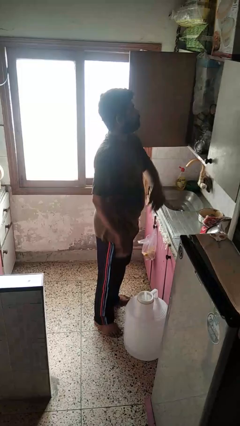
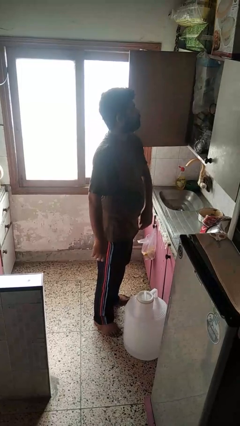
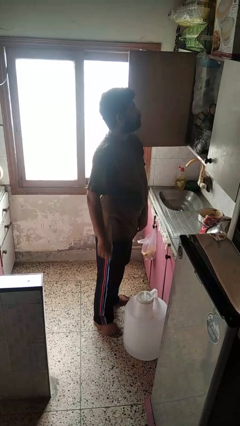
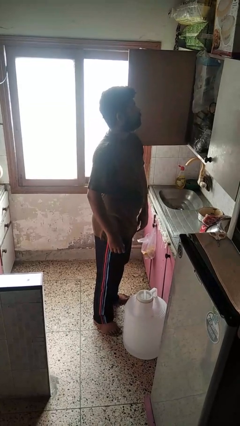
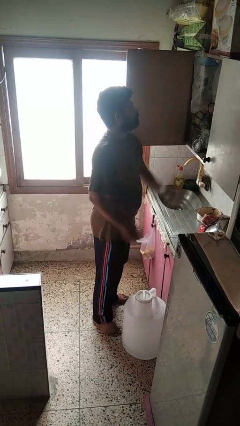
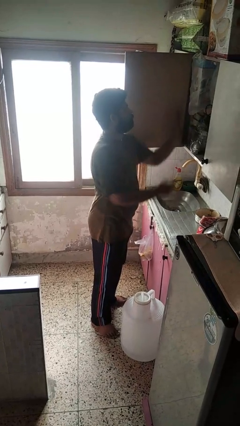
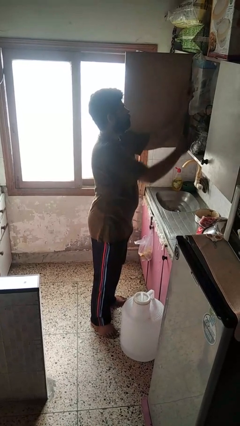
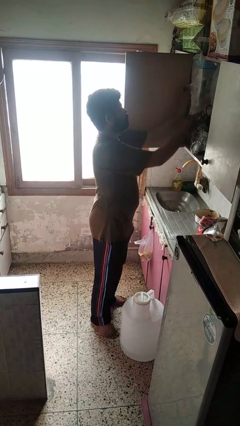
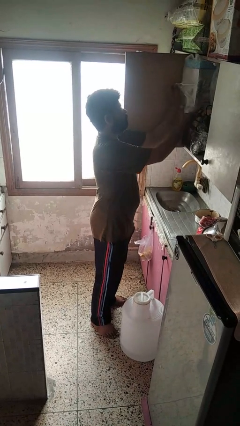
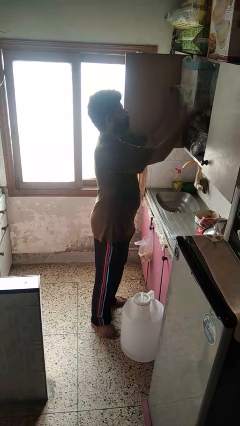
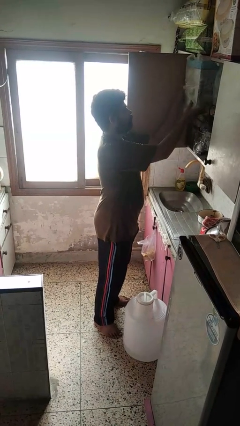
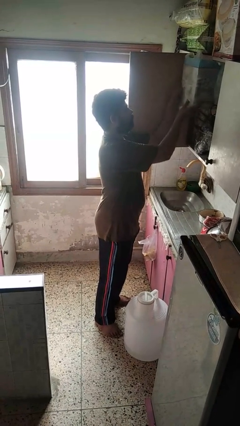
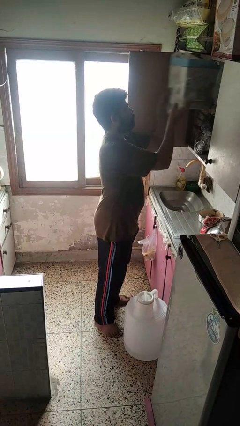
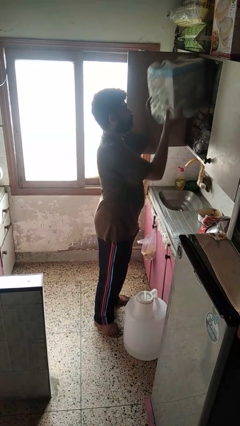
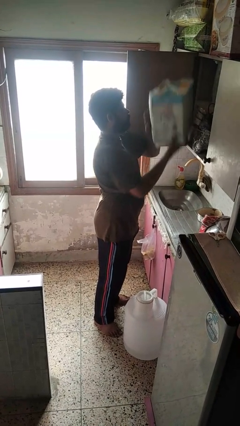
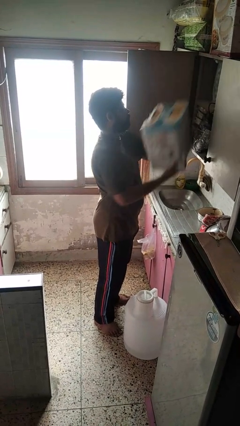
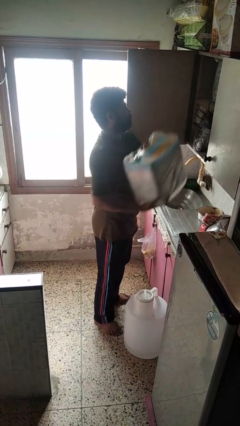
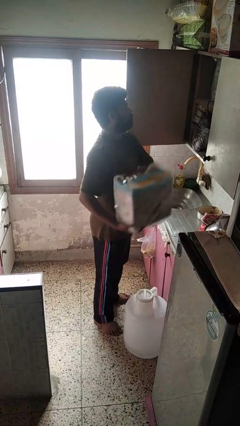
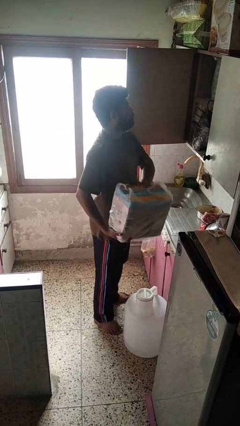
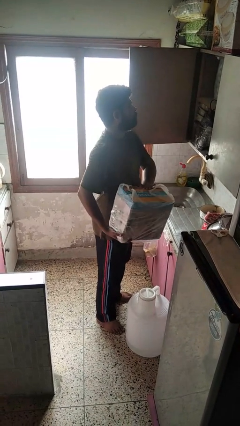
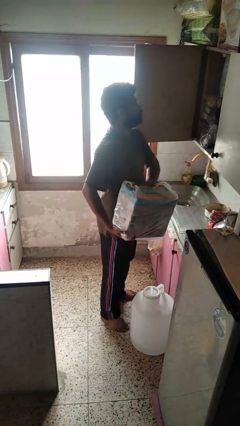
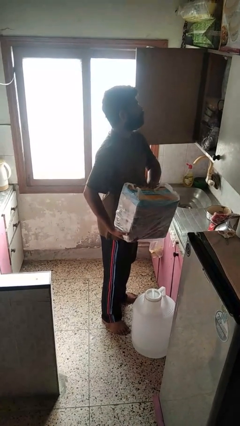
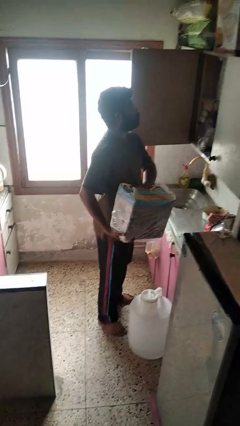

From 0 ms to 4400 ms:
person picks up object from cabinet

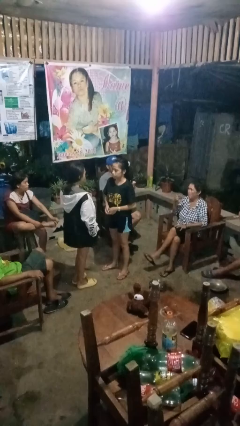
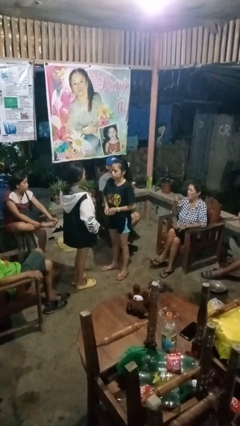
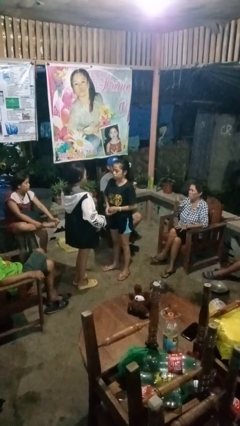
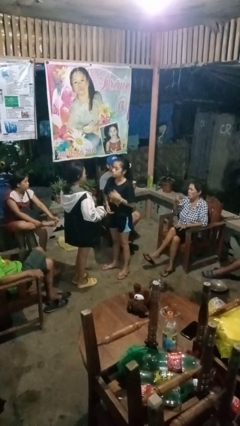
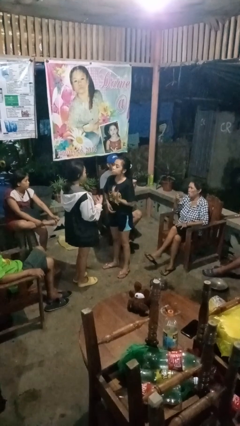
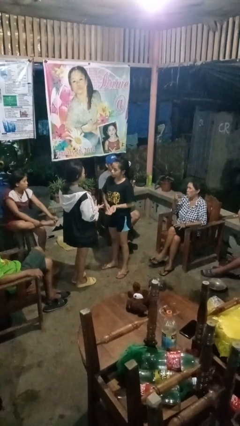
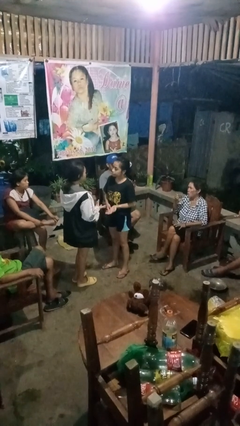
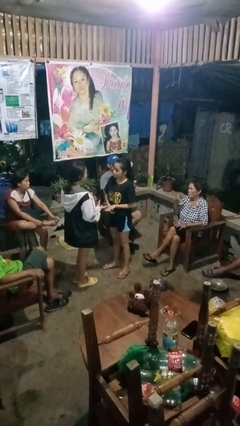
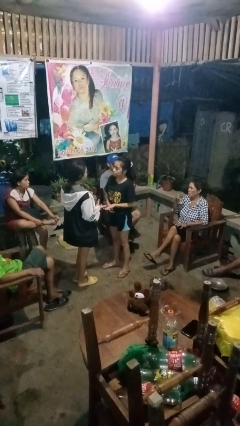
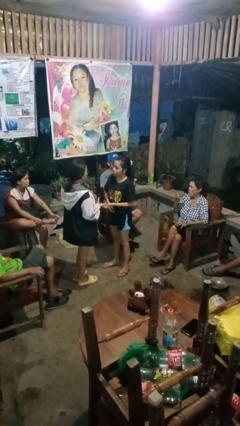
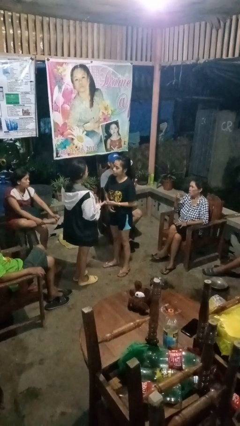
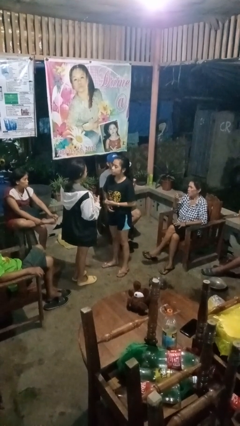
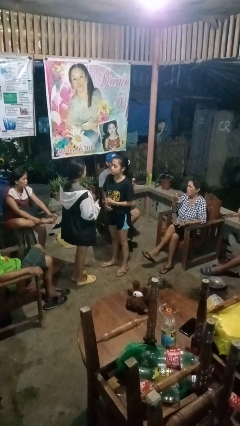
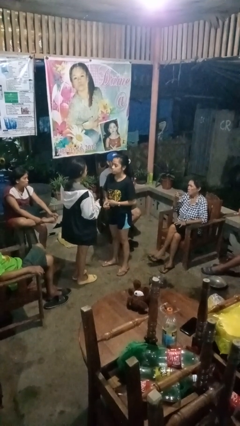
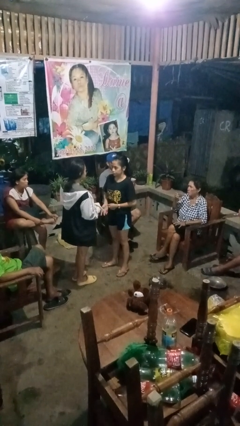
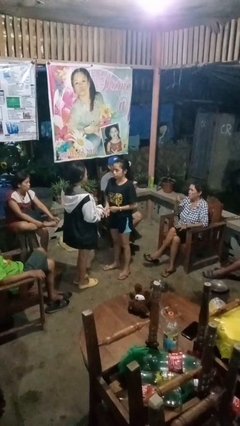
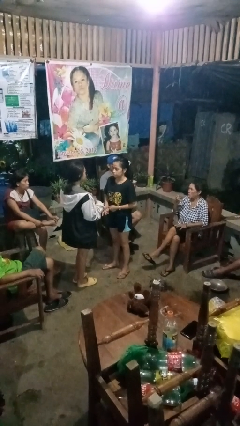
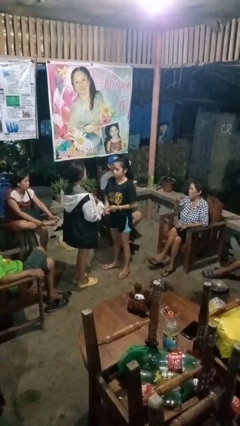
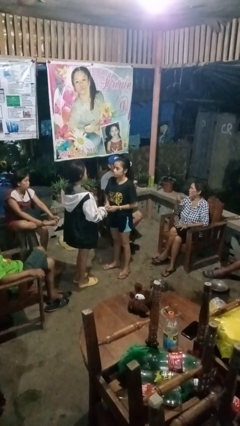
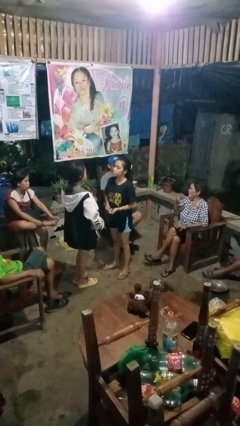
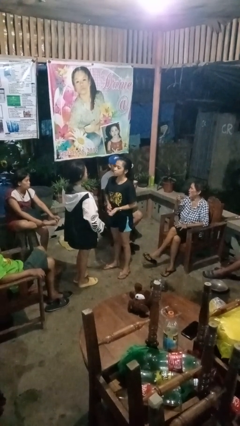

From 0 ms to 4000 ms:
person talks to person

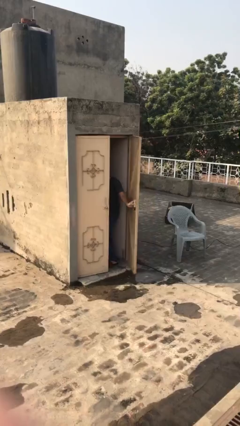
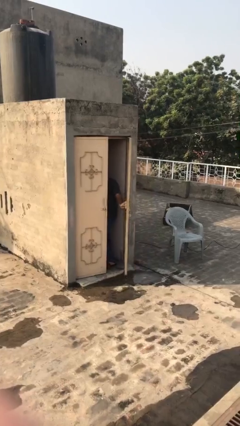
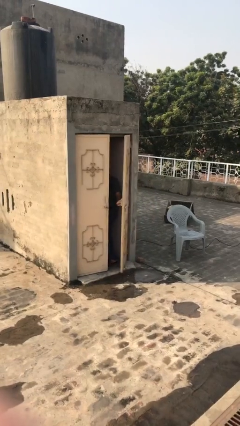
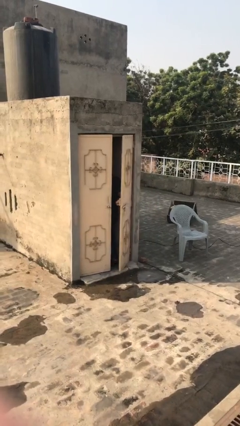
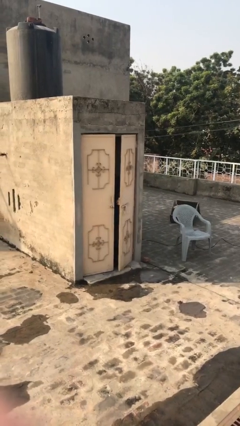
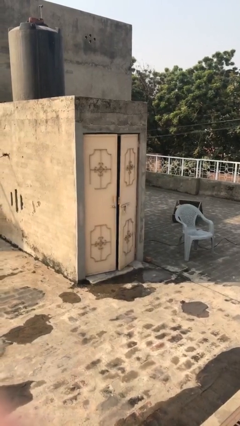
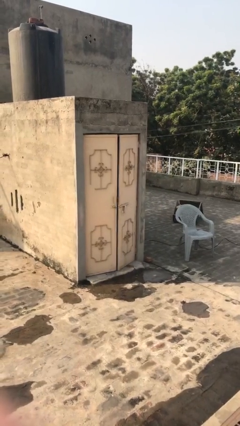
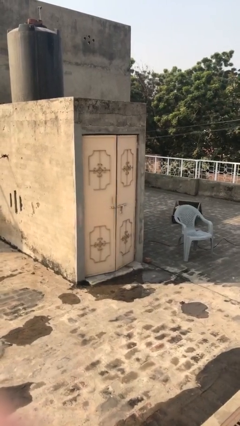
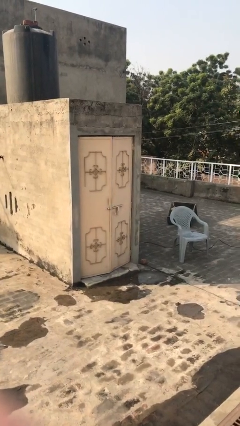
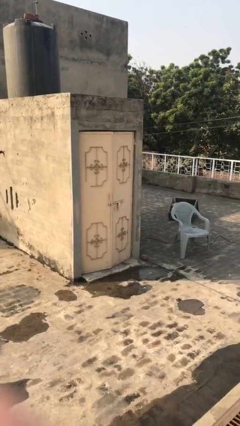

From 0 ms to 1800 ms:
person closes facility door

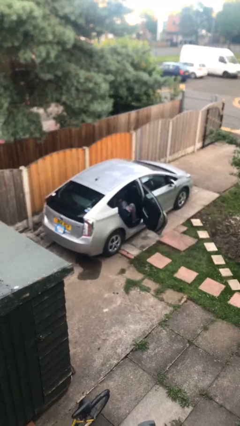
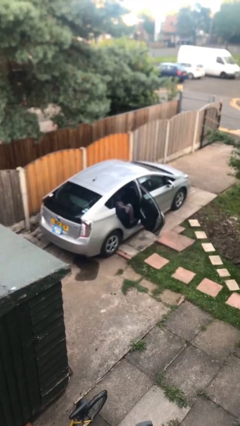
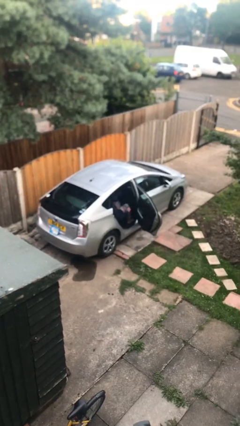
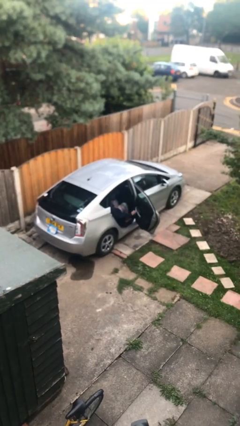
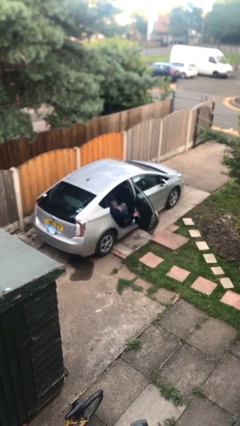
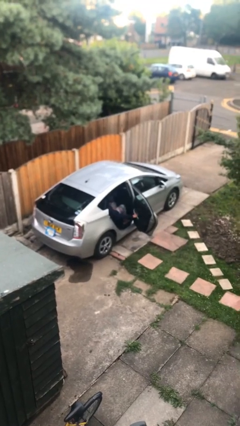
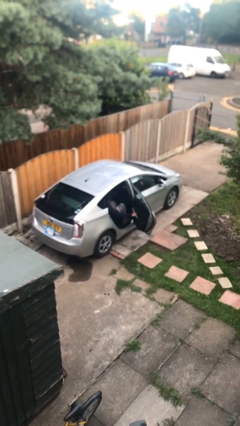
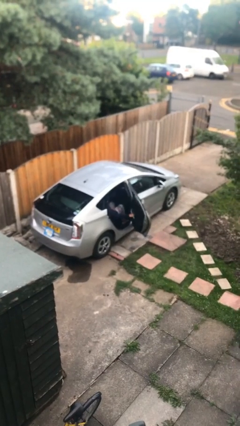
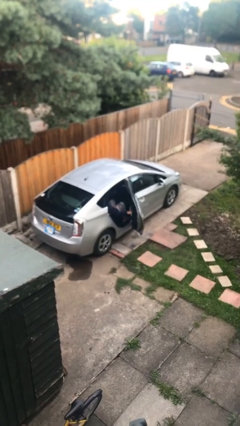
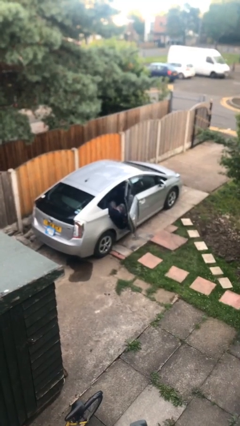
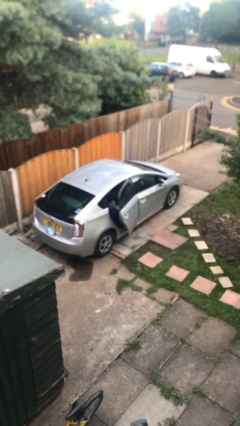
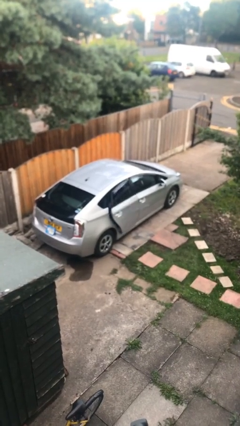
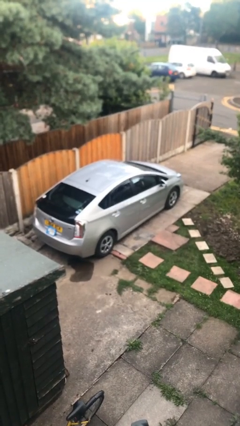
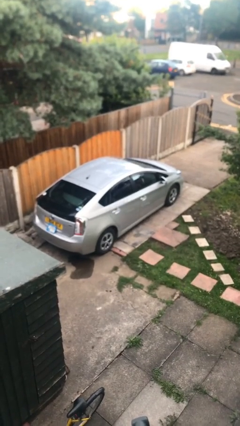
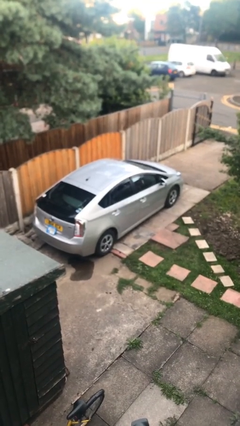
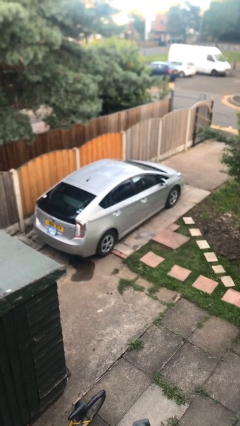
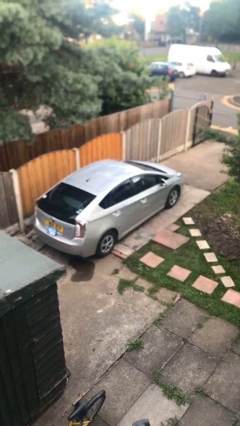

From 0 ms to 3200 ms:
person closes car door

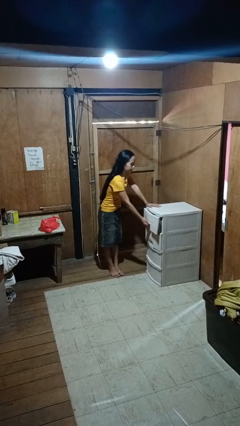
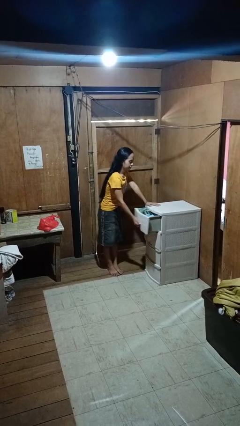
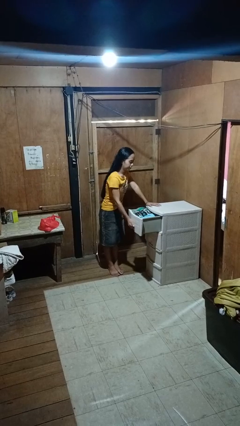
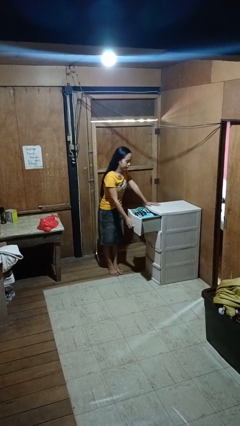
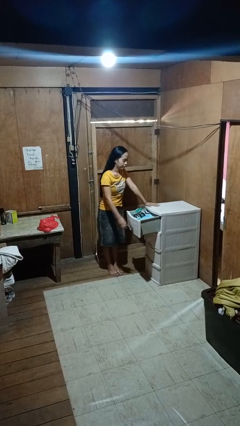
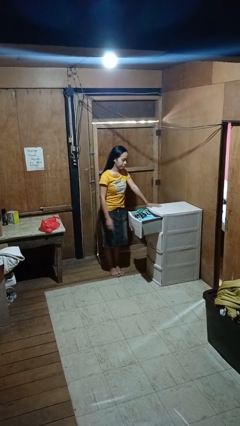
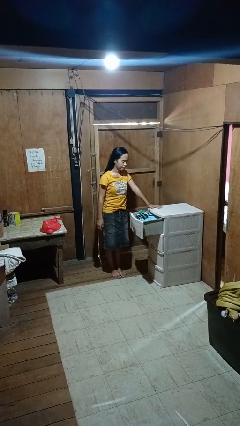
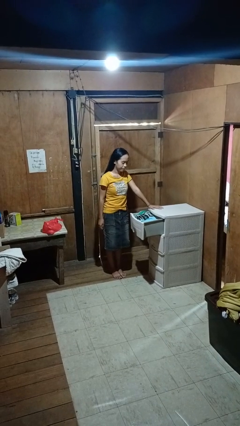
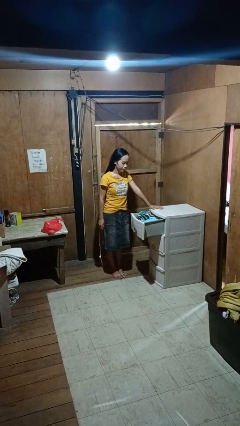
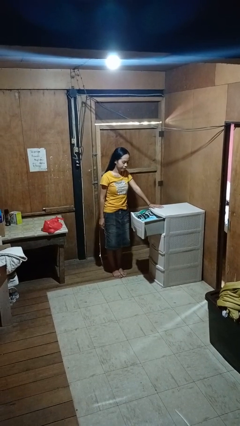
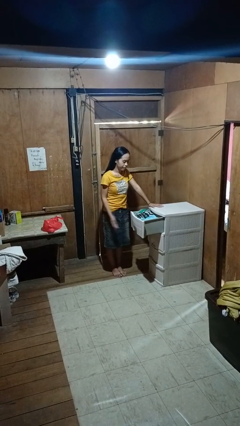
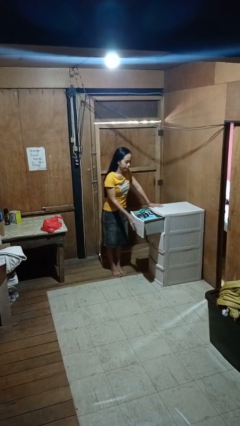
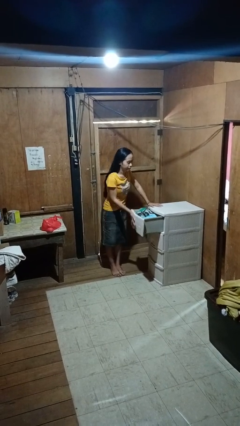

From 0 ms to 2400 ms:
person opens dresser drawer

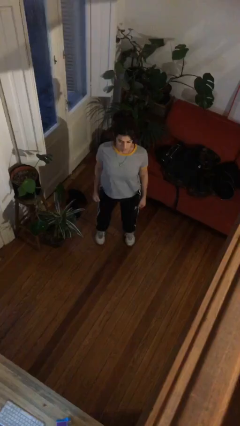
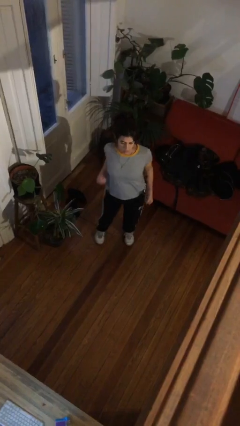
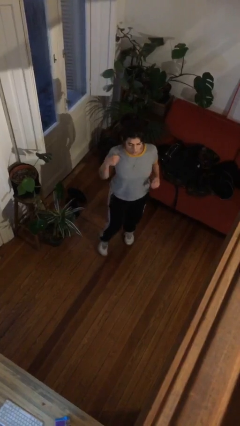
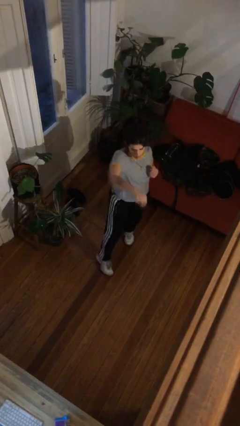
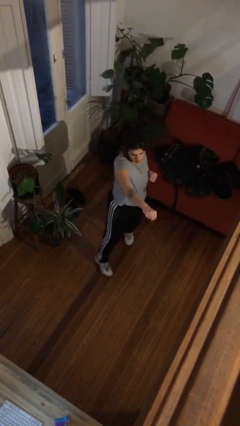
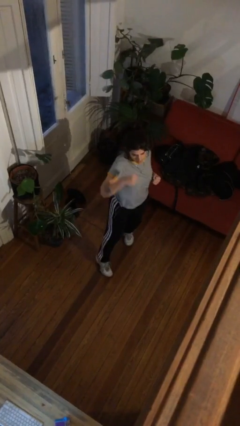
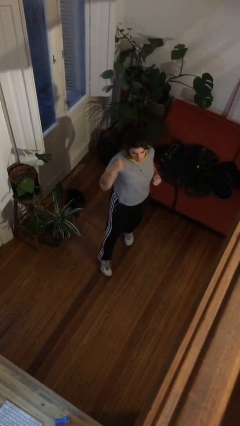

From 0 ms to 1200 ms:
person punches

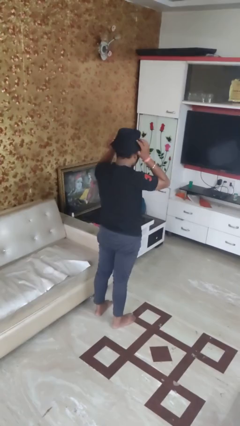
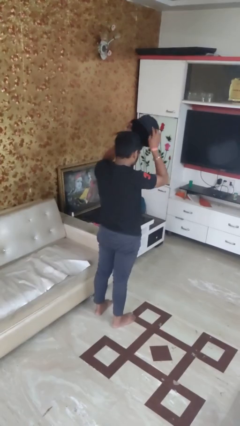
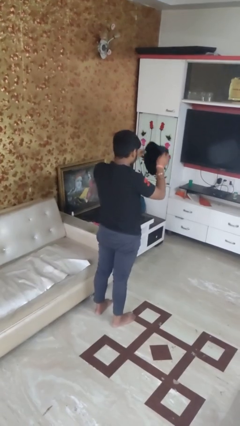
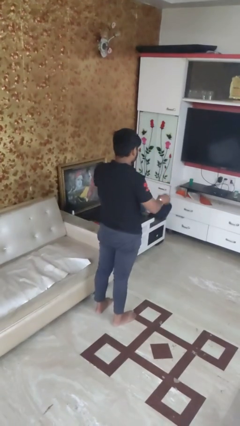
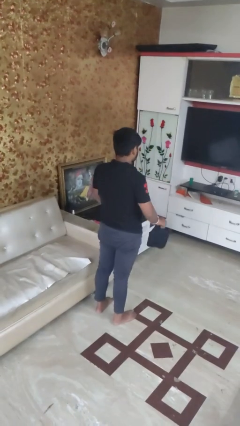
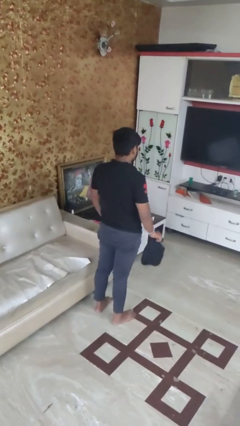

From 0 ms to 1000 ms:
person takes off hat
